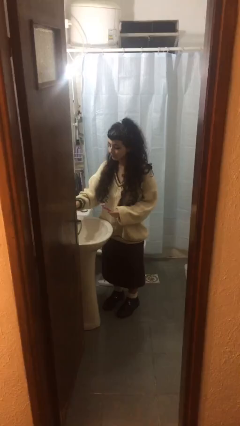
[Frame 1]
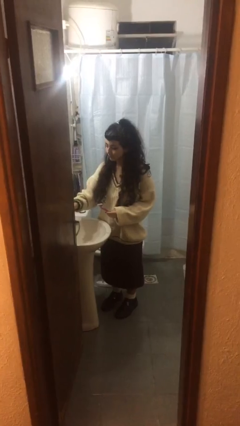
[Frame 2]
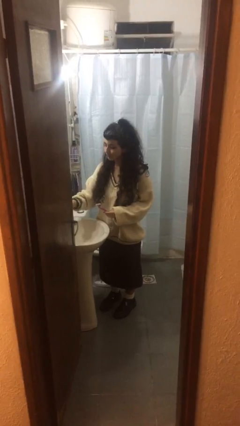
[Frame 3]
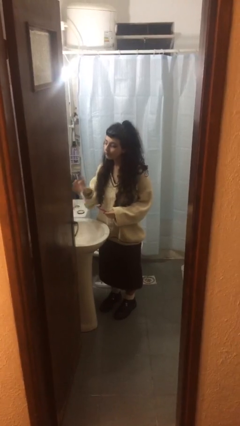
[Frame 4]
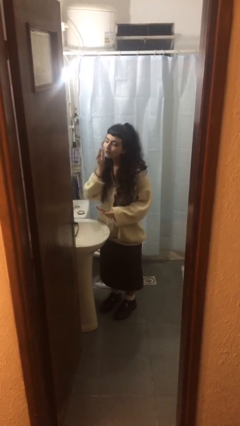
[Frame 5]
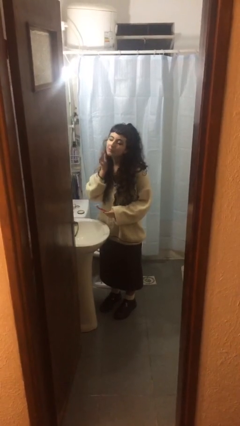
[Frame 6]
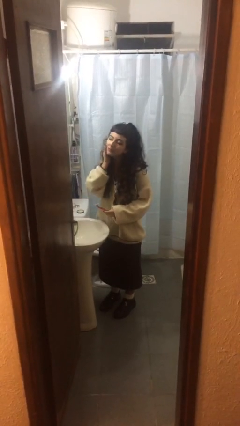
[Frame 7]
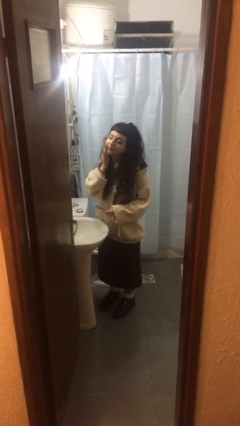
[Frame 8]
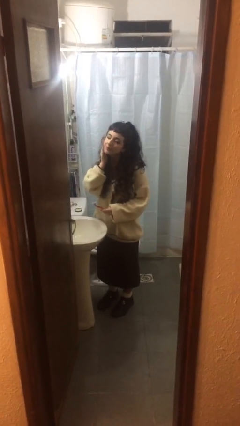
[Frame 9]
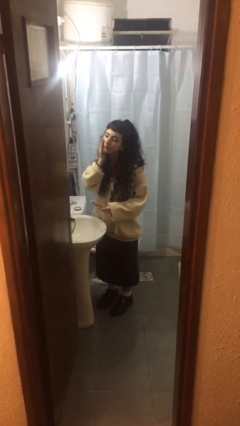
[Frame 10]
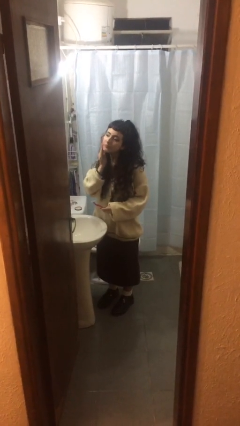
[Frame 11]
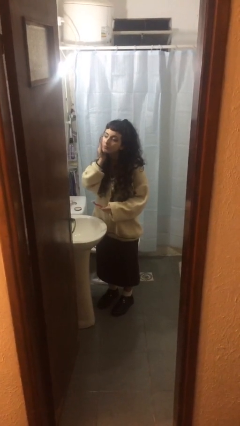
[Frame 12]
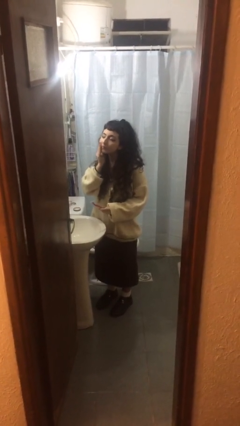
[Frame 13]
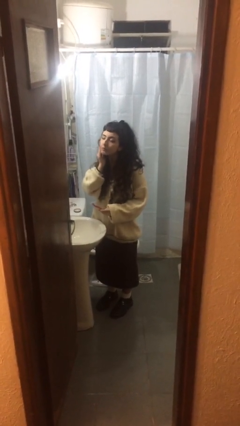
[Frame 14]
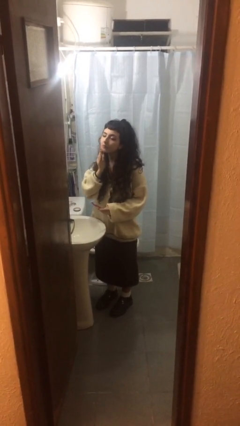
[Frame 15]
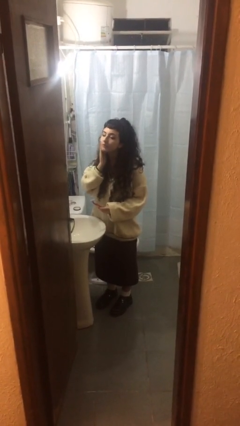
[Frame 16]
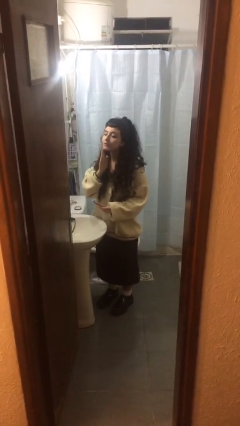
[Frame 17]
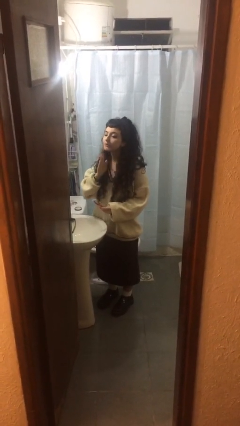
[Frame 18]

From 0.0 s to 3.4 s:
person applies shaving cream

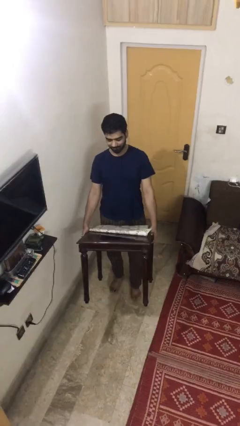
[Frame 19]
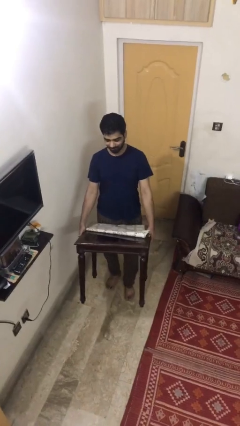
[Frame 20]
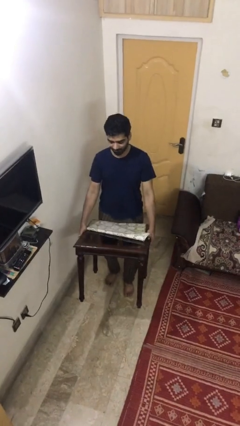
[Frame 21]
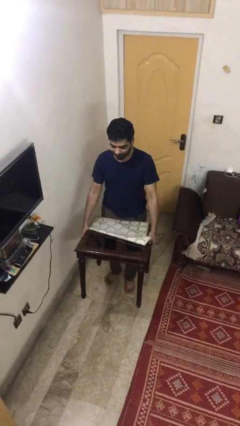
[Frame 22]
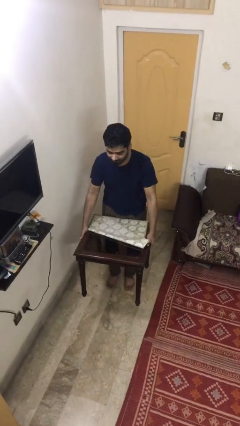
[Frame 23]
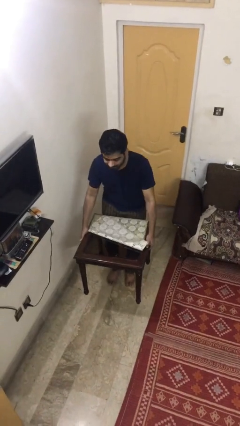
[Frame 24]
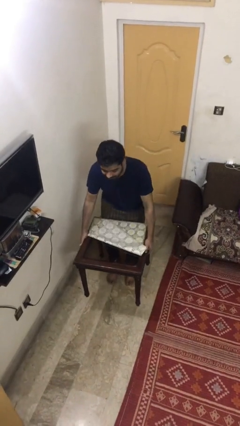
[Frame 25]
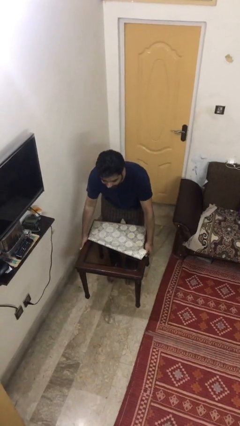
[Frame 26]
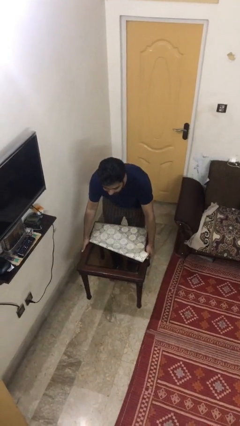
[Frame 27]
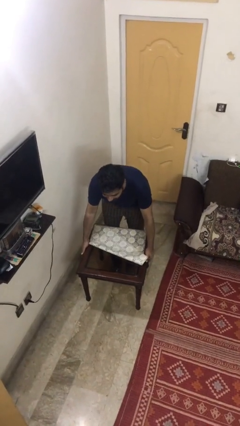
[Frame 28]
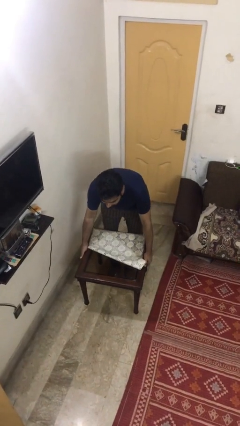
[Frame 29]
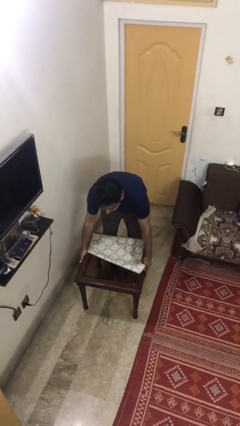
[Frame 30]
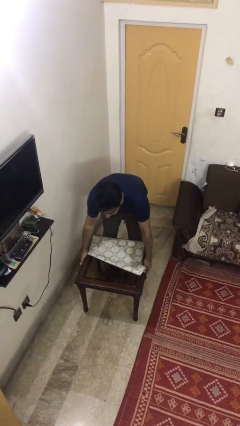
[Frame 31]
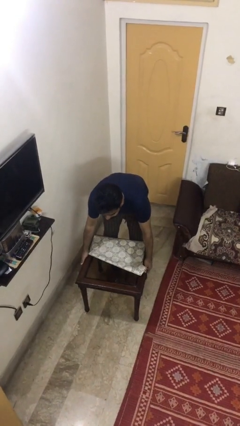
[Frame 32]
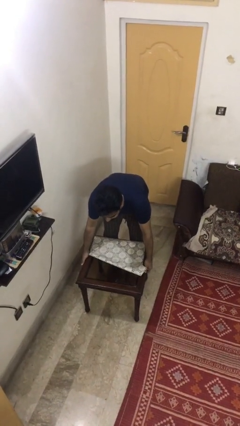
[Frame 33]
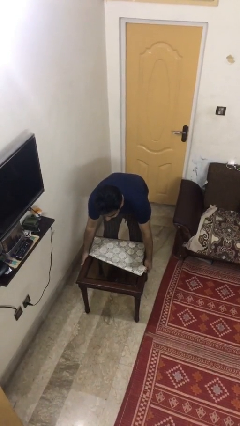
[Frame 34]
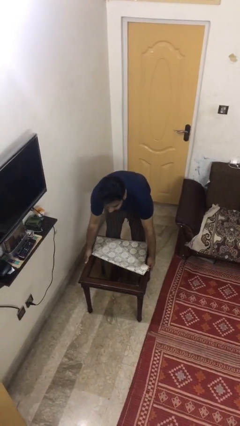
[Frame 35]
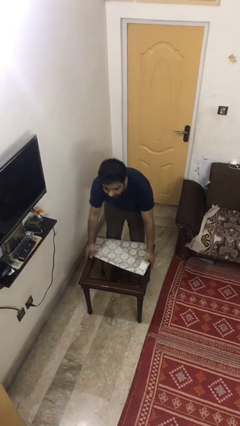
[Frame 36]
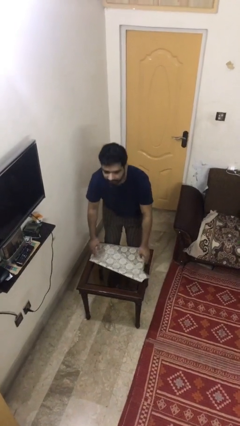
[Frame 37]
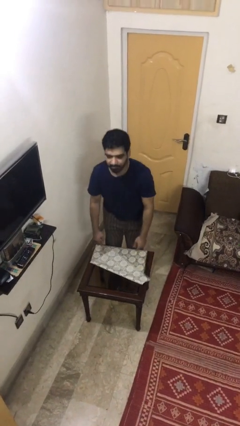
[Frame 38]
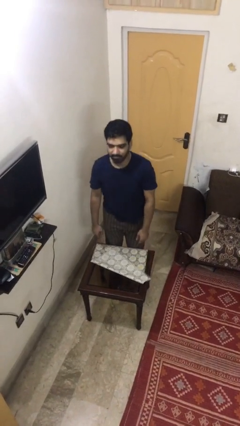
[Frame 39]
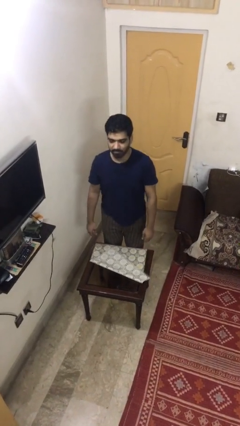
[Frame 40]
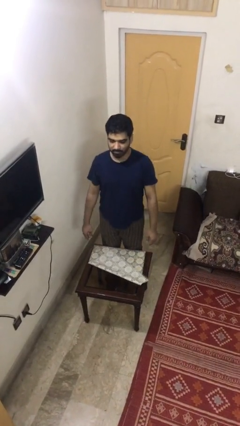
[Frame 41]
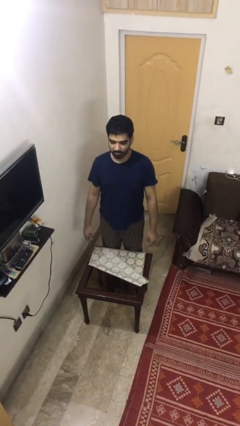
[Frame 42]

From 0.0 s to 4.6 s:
person puts down object on floor

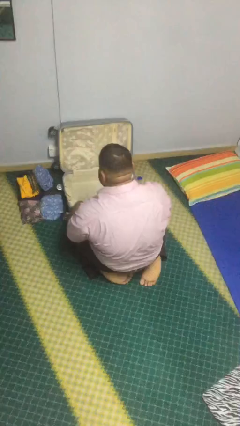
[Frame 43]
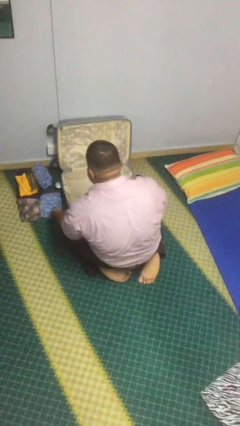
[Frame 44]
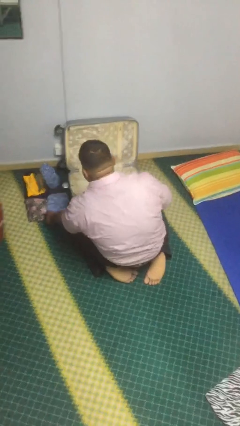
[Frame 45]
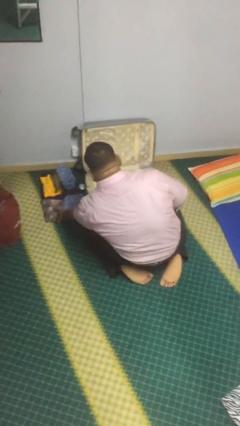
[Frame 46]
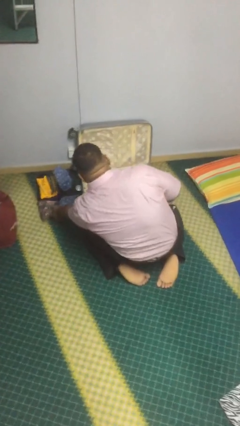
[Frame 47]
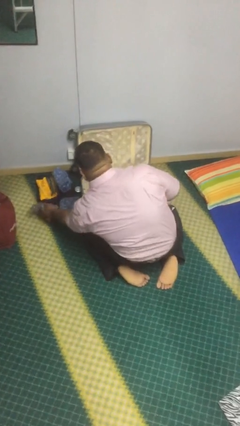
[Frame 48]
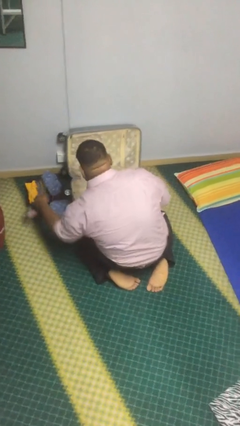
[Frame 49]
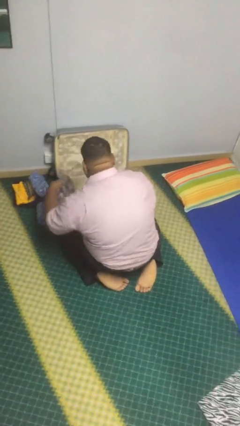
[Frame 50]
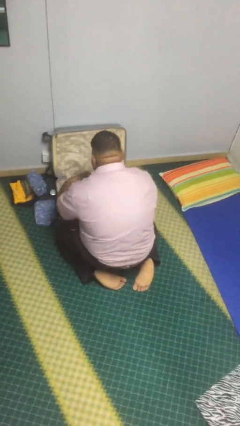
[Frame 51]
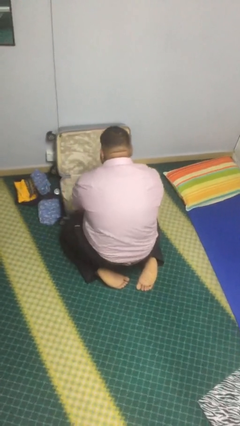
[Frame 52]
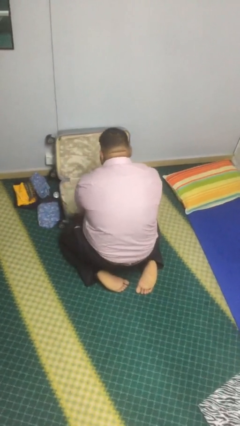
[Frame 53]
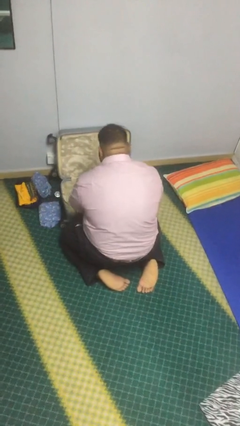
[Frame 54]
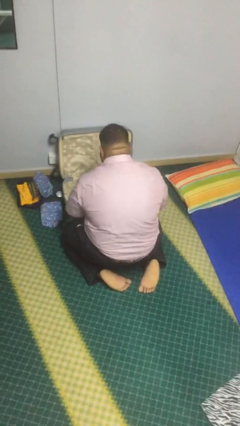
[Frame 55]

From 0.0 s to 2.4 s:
person loads clothes into suitcase

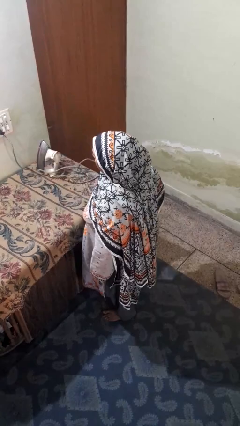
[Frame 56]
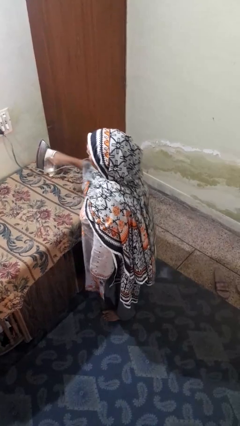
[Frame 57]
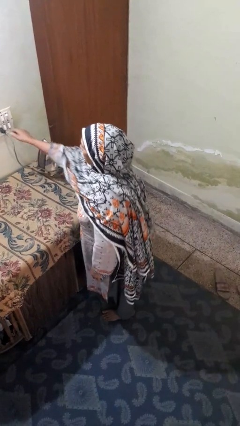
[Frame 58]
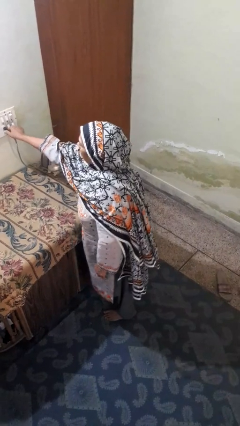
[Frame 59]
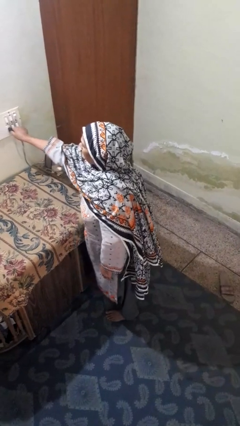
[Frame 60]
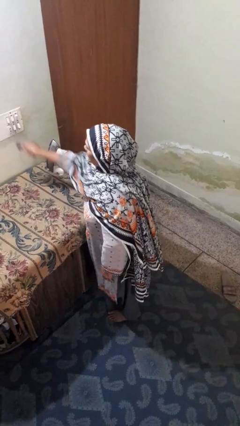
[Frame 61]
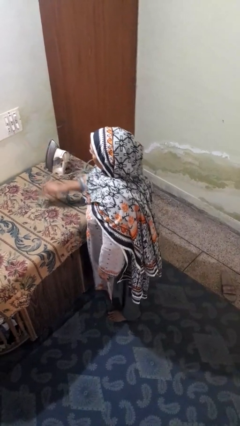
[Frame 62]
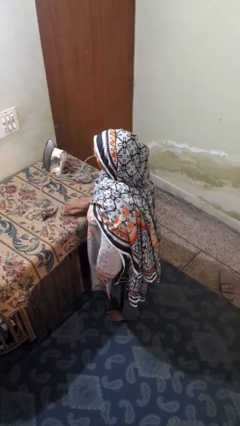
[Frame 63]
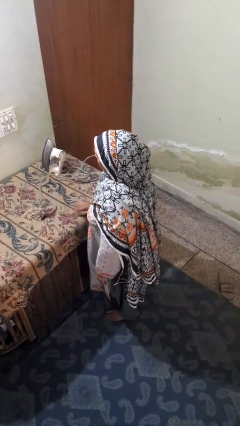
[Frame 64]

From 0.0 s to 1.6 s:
person unplugs from electrical socket

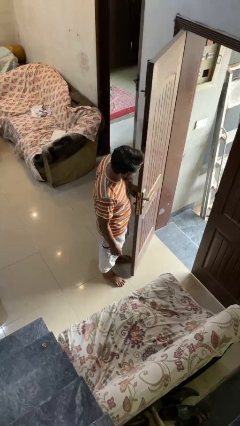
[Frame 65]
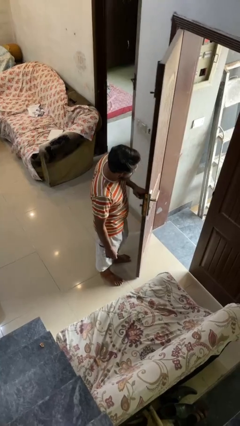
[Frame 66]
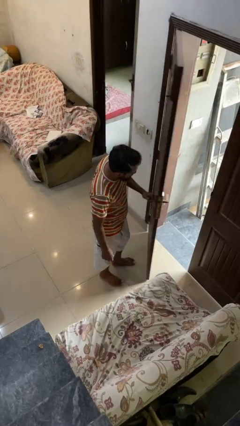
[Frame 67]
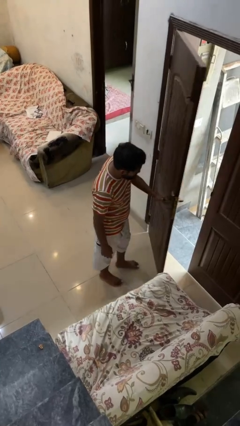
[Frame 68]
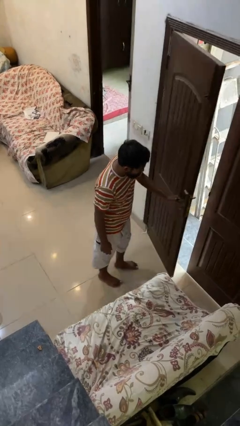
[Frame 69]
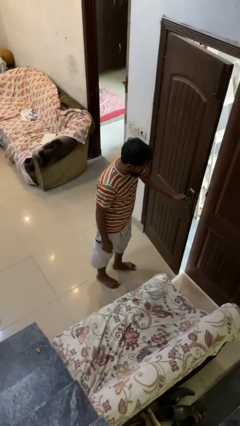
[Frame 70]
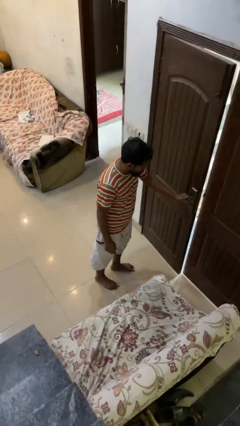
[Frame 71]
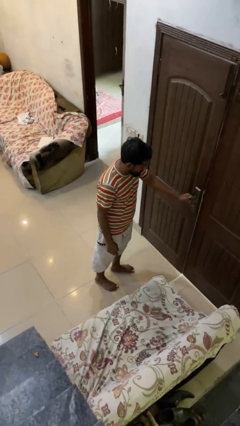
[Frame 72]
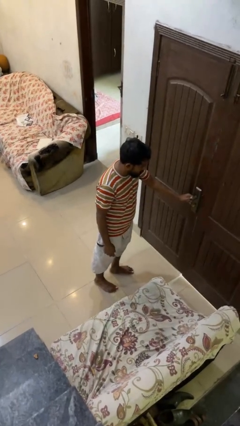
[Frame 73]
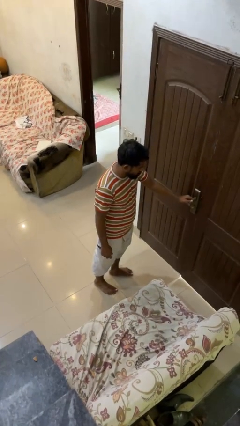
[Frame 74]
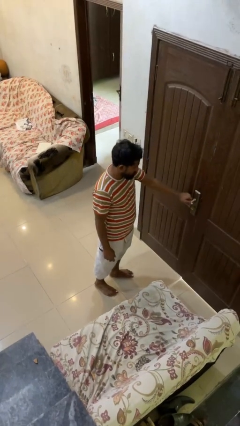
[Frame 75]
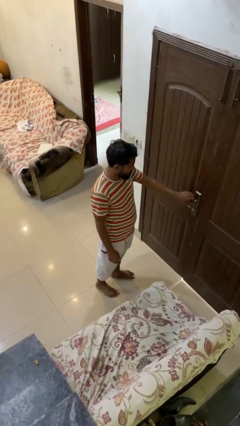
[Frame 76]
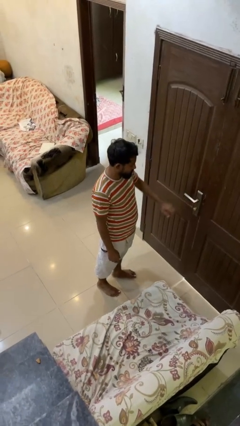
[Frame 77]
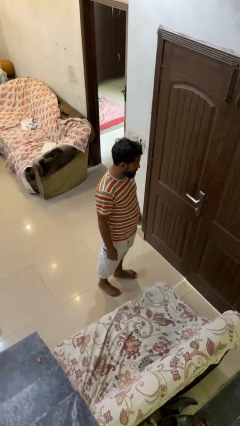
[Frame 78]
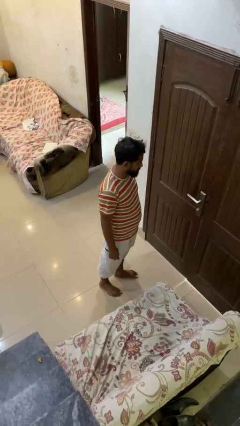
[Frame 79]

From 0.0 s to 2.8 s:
person closes facility door

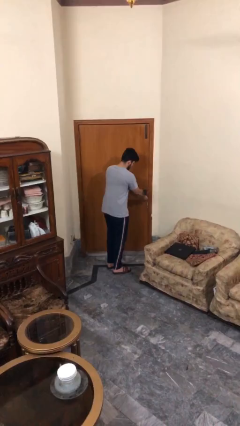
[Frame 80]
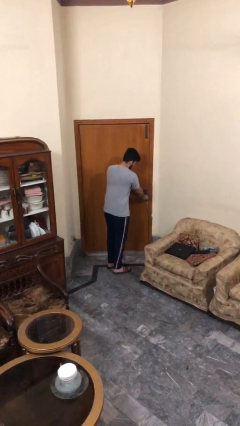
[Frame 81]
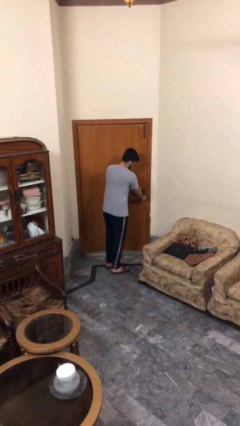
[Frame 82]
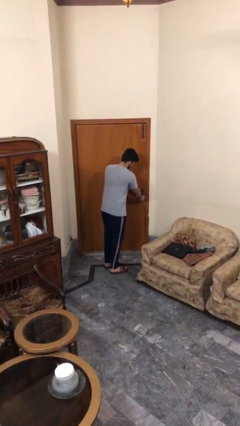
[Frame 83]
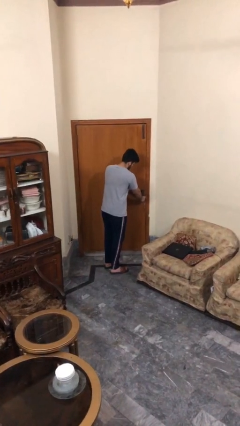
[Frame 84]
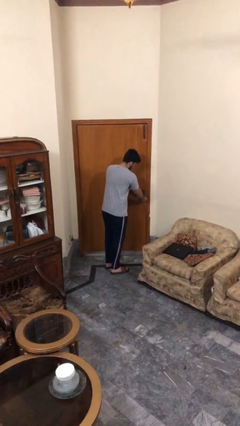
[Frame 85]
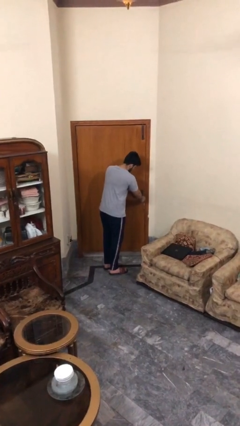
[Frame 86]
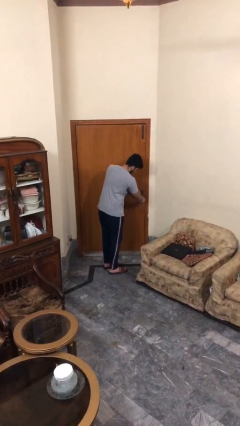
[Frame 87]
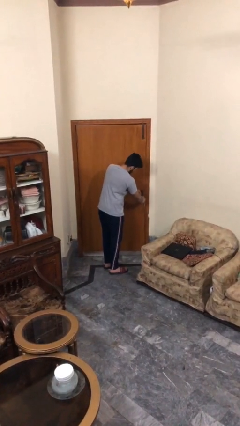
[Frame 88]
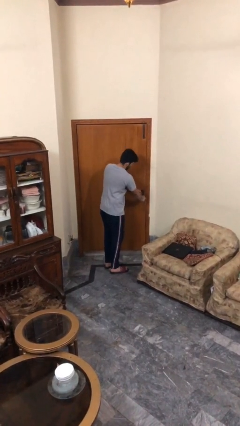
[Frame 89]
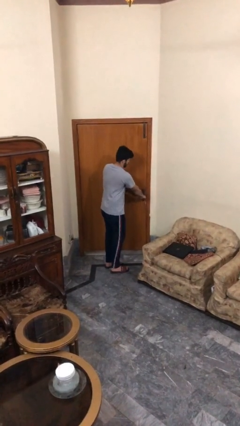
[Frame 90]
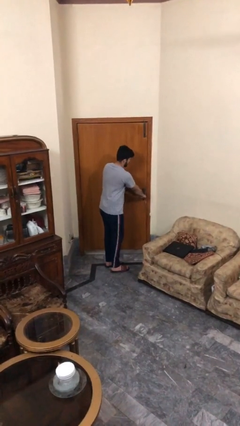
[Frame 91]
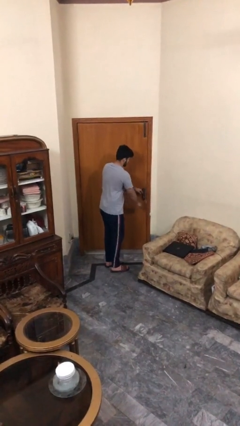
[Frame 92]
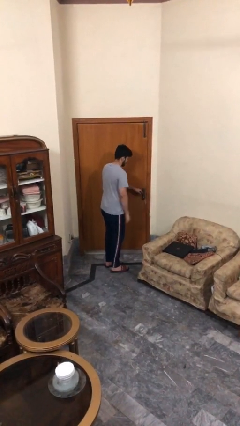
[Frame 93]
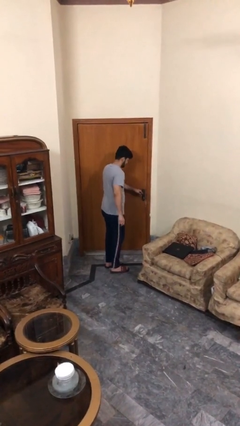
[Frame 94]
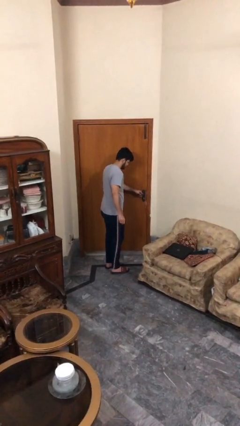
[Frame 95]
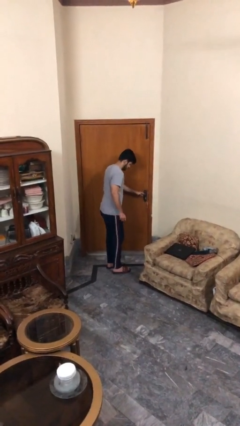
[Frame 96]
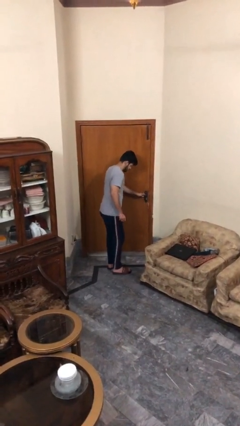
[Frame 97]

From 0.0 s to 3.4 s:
person unlocks door with keys
